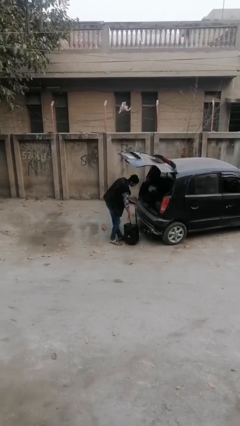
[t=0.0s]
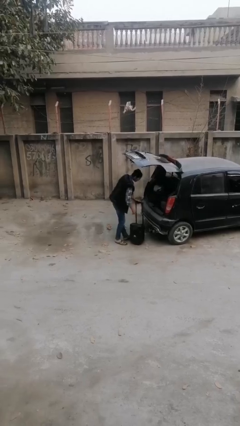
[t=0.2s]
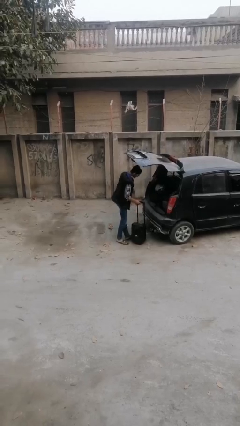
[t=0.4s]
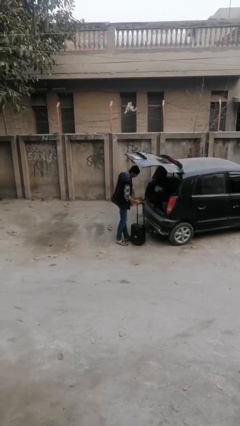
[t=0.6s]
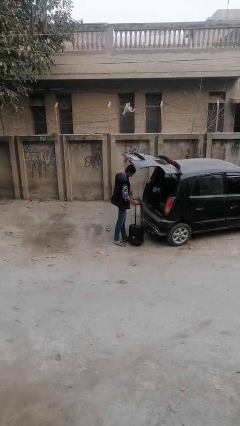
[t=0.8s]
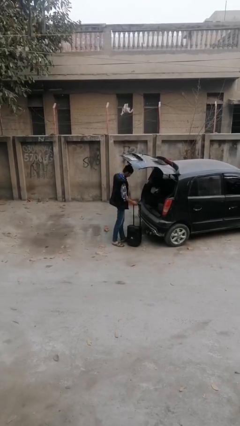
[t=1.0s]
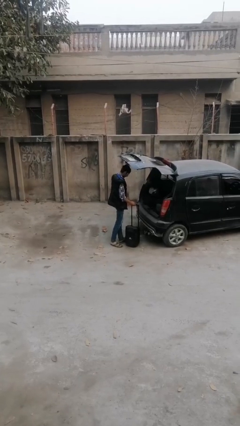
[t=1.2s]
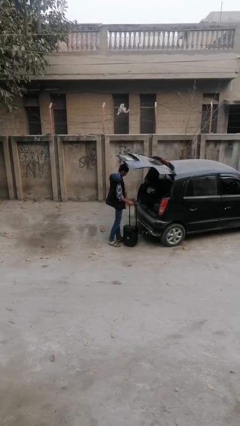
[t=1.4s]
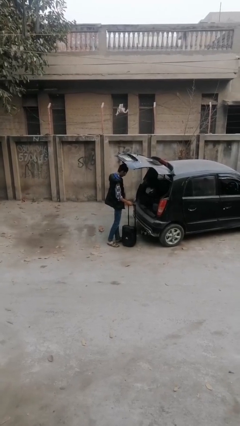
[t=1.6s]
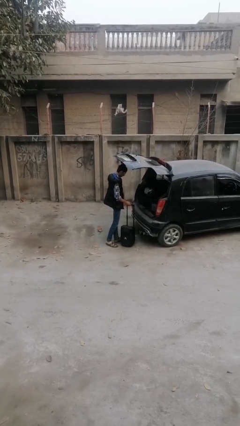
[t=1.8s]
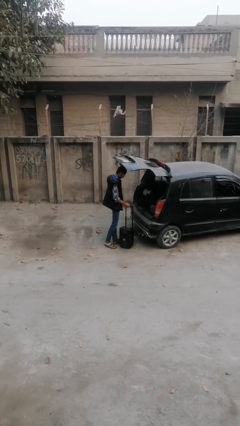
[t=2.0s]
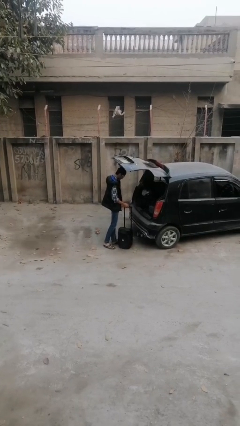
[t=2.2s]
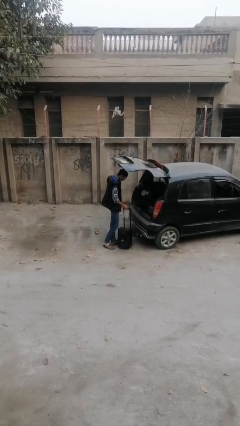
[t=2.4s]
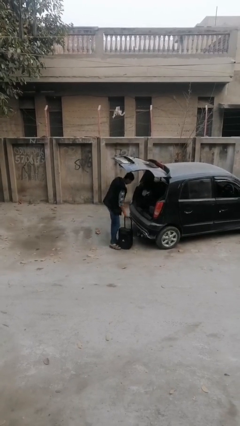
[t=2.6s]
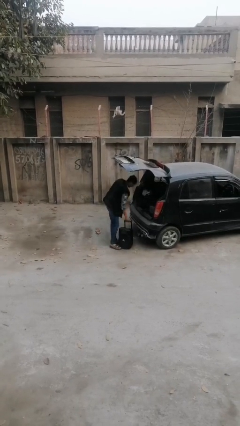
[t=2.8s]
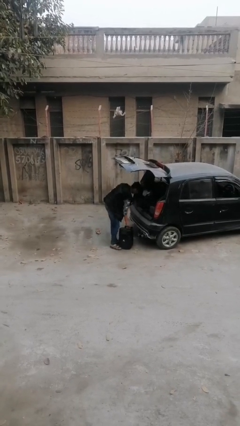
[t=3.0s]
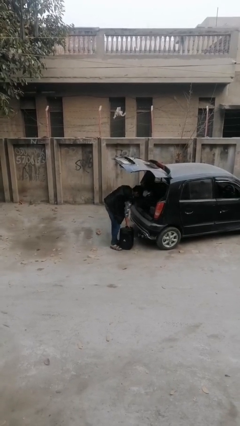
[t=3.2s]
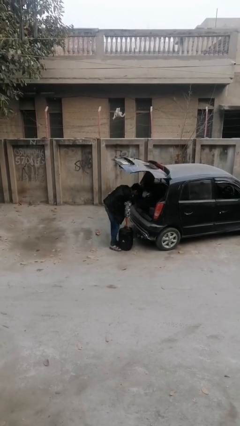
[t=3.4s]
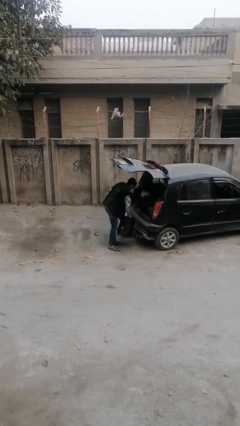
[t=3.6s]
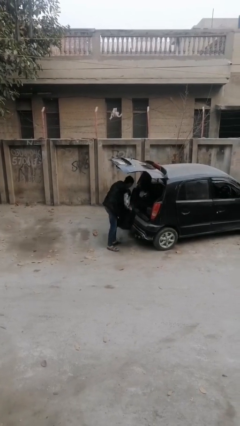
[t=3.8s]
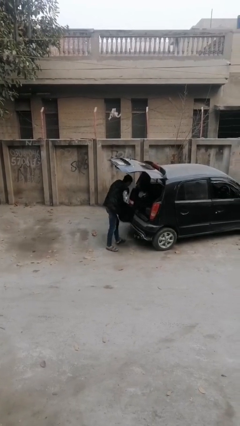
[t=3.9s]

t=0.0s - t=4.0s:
person unloads car

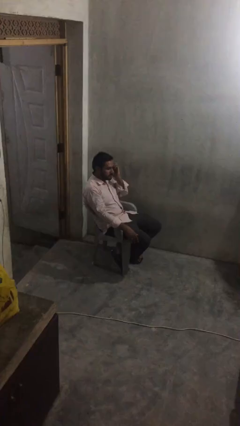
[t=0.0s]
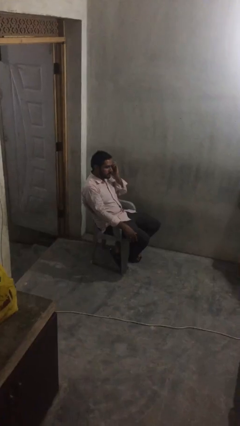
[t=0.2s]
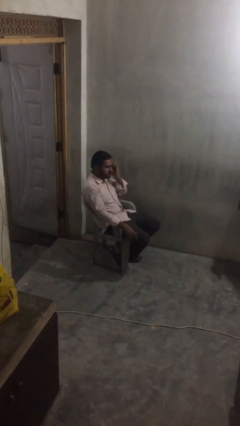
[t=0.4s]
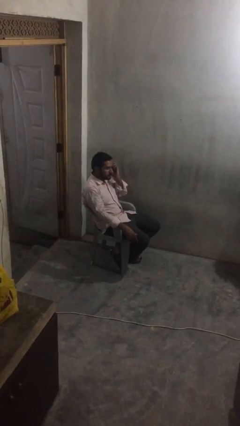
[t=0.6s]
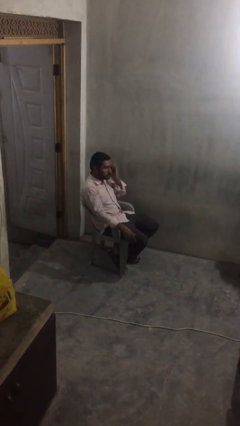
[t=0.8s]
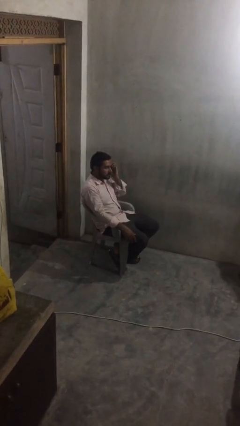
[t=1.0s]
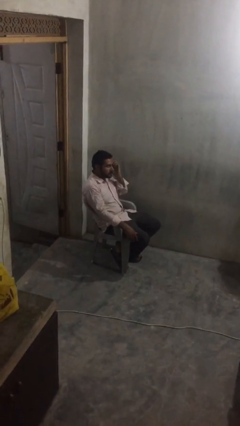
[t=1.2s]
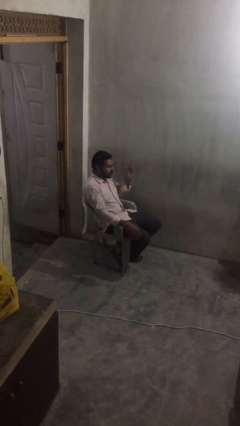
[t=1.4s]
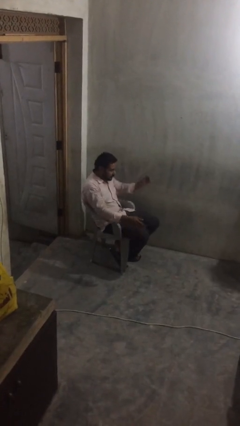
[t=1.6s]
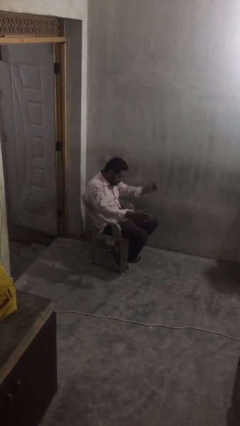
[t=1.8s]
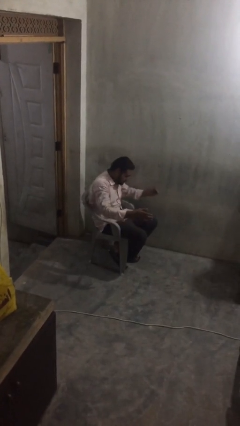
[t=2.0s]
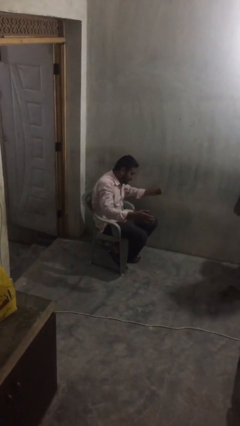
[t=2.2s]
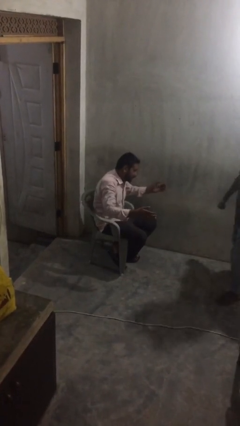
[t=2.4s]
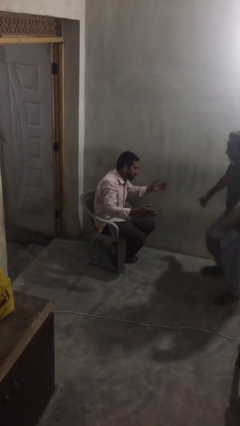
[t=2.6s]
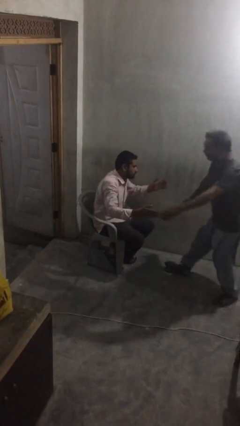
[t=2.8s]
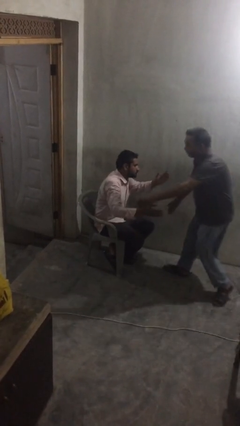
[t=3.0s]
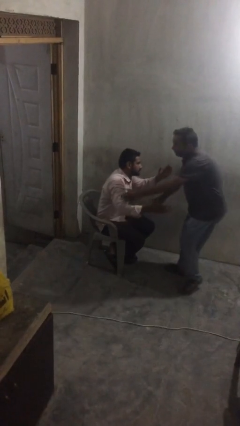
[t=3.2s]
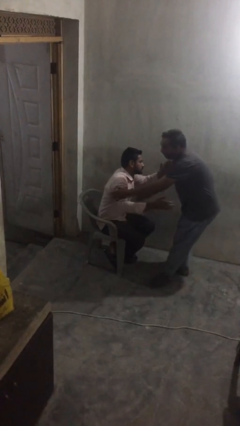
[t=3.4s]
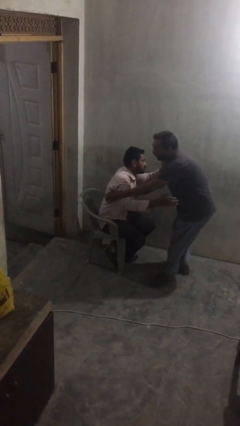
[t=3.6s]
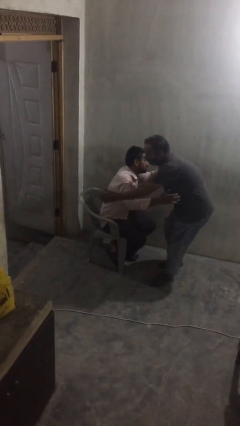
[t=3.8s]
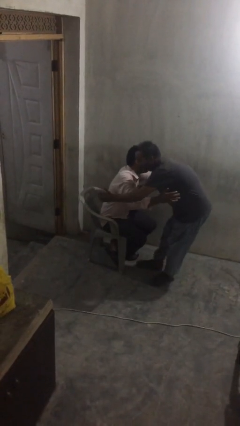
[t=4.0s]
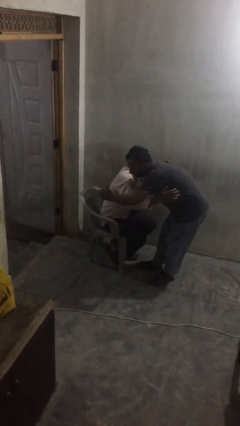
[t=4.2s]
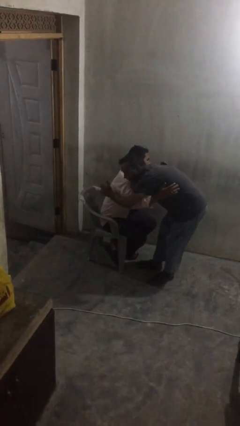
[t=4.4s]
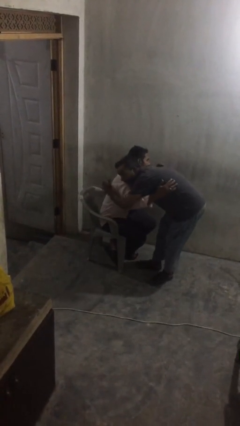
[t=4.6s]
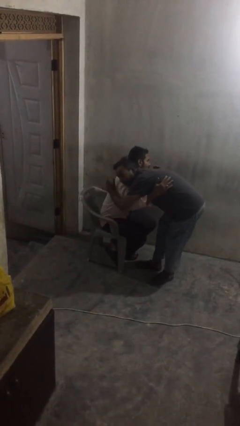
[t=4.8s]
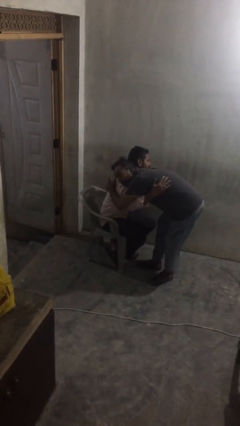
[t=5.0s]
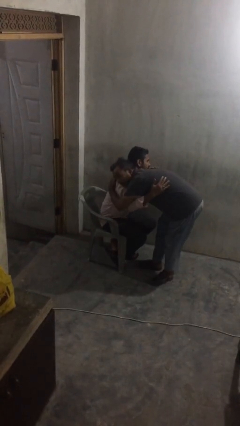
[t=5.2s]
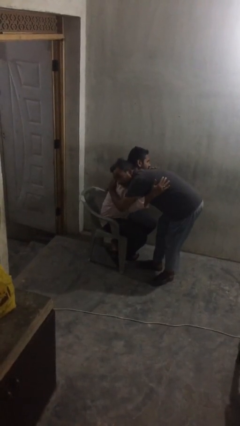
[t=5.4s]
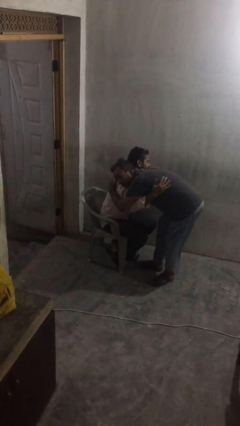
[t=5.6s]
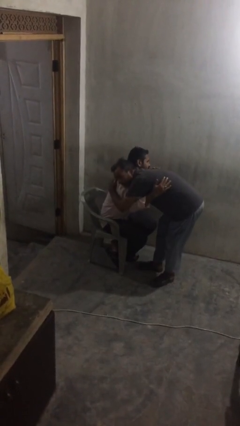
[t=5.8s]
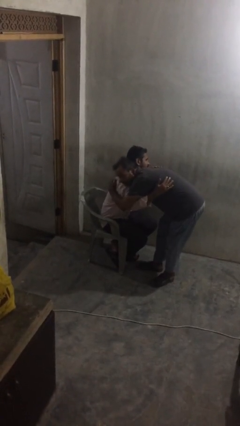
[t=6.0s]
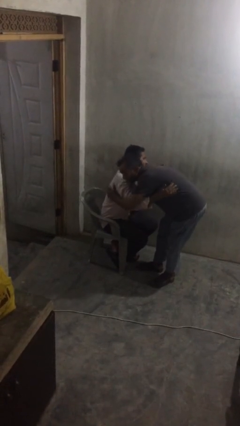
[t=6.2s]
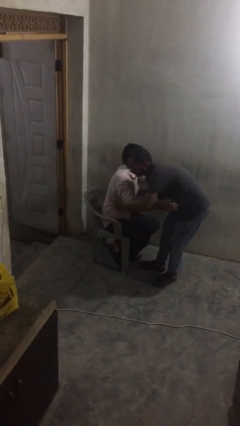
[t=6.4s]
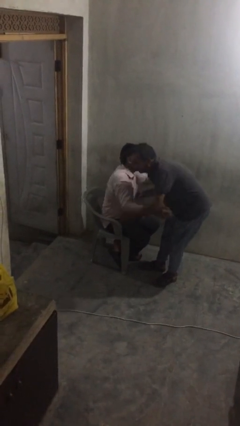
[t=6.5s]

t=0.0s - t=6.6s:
person embraces person

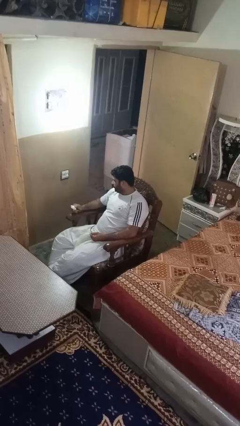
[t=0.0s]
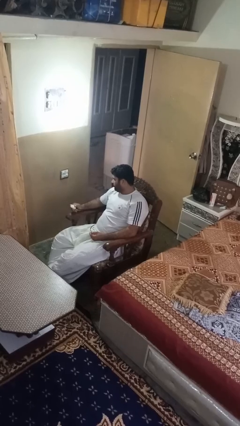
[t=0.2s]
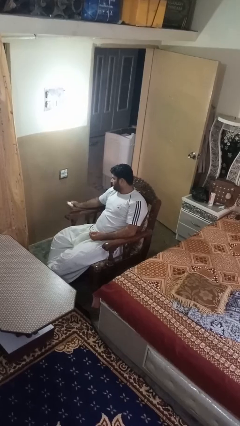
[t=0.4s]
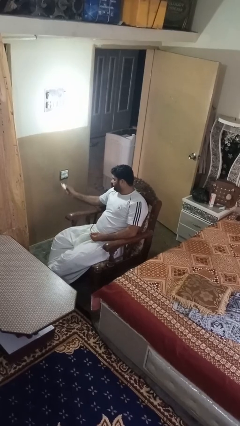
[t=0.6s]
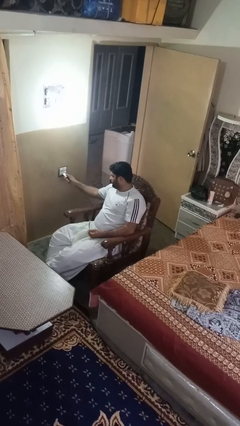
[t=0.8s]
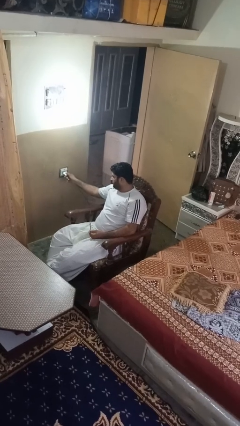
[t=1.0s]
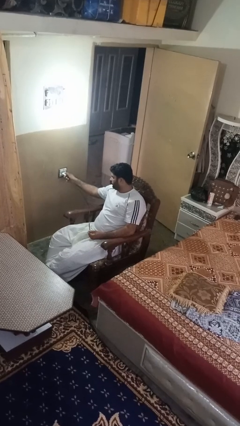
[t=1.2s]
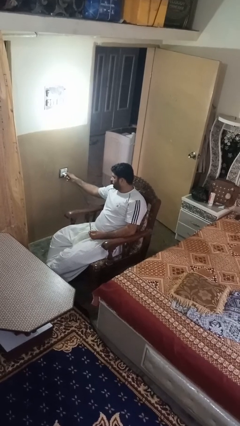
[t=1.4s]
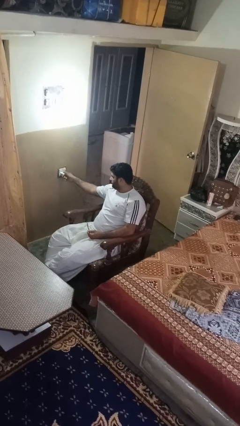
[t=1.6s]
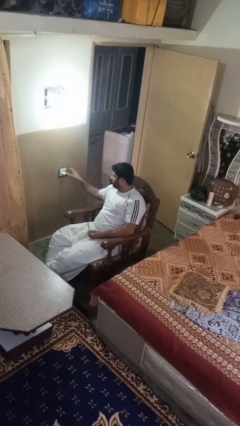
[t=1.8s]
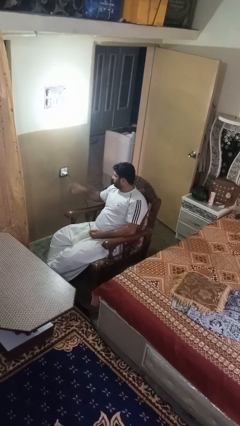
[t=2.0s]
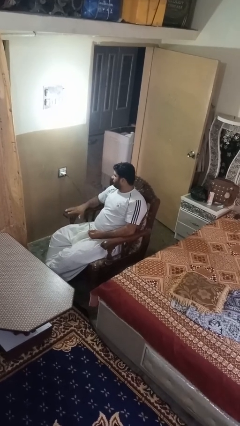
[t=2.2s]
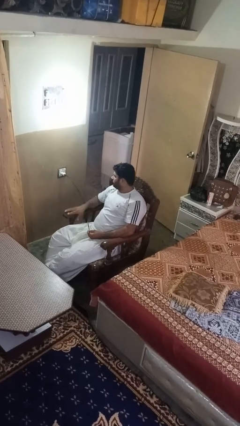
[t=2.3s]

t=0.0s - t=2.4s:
person plugs into electrical socket

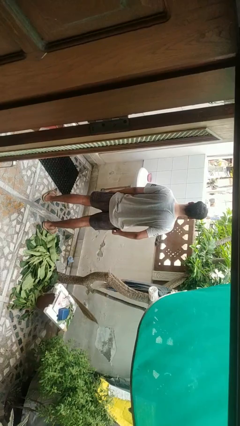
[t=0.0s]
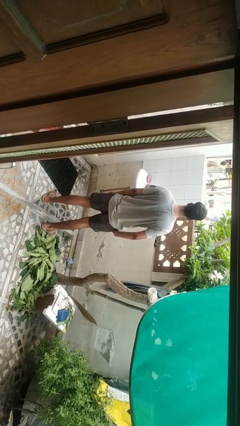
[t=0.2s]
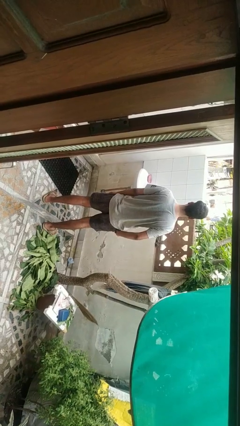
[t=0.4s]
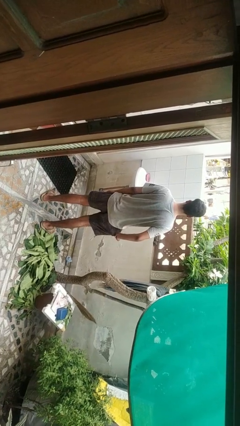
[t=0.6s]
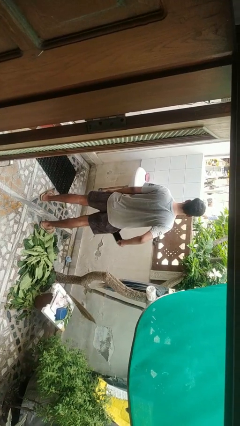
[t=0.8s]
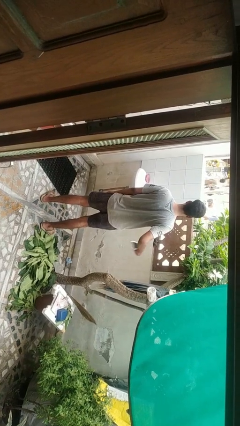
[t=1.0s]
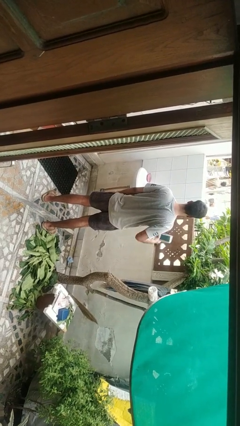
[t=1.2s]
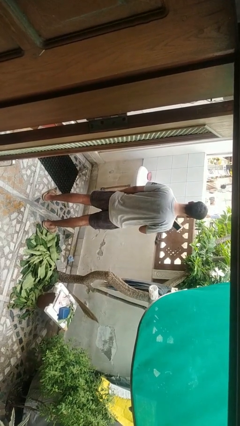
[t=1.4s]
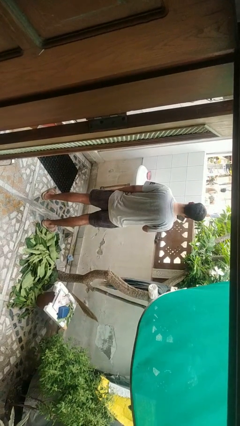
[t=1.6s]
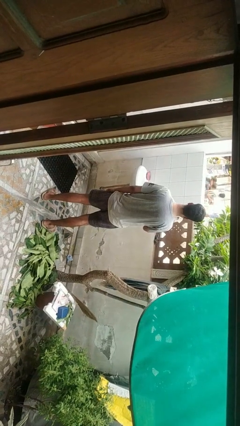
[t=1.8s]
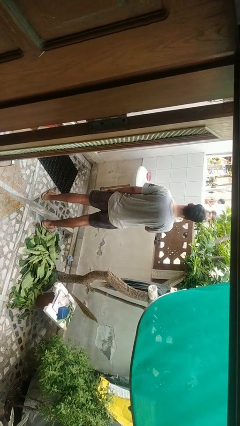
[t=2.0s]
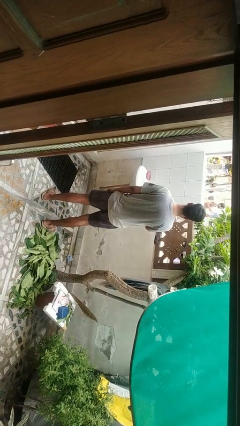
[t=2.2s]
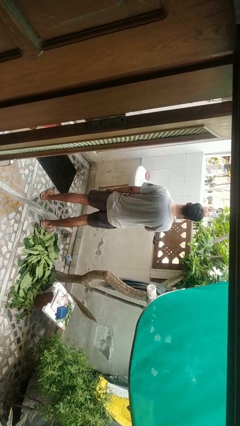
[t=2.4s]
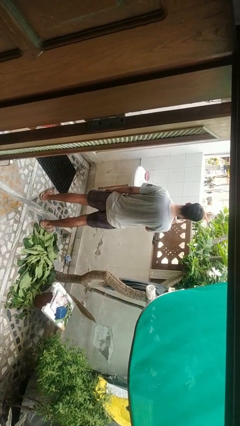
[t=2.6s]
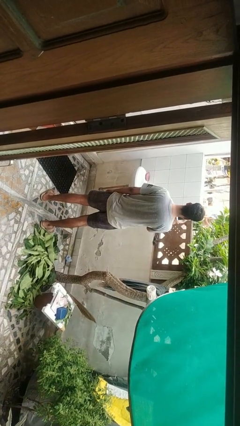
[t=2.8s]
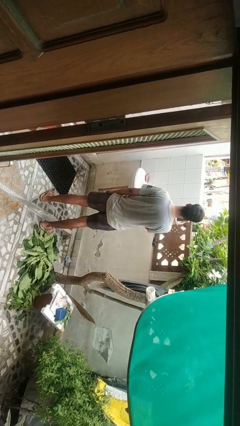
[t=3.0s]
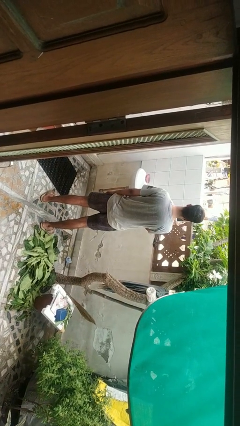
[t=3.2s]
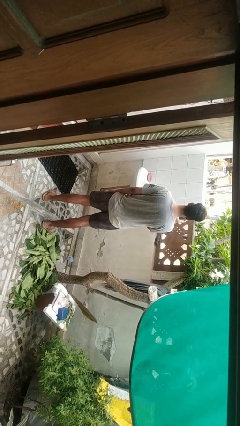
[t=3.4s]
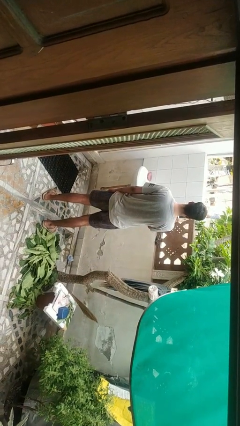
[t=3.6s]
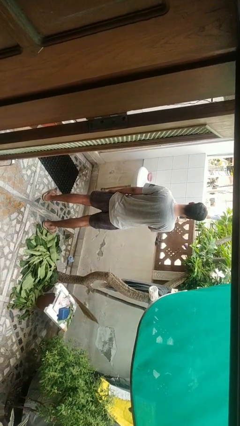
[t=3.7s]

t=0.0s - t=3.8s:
person takes phone from pocket

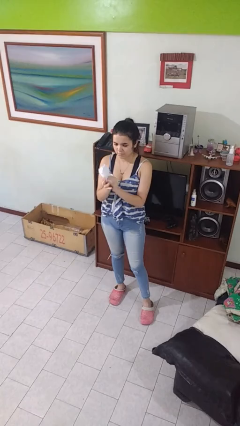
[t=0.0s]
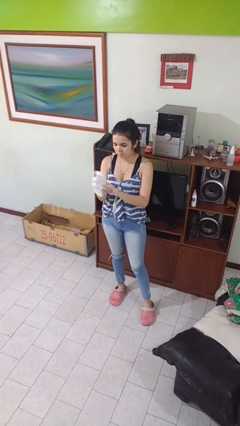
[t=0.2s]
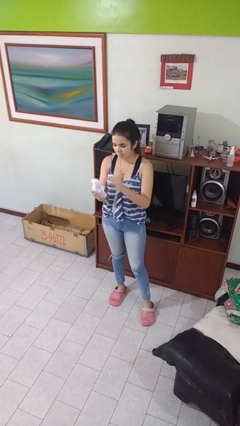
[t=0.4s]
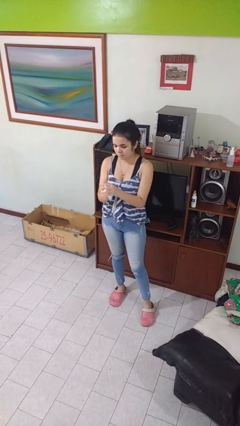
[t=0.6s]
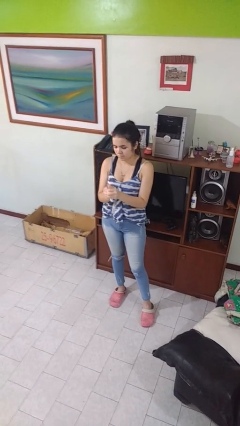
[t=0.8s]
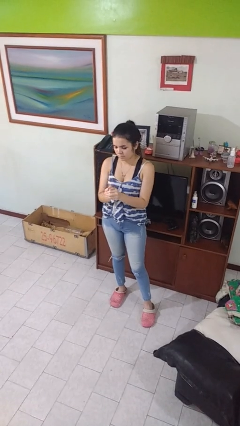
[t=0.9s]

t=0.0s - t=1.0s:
person crumples paper
